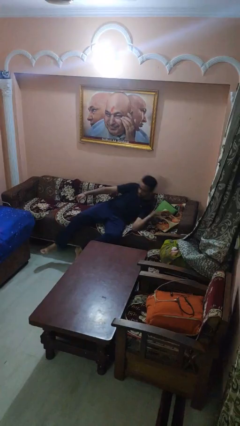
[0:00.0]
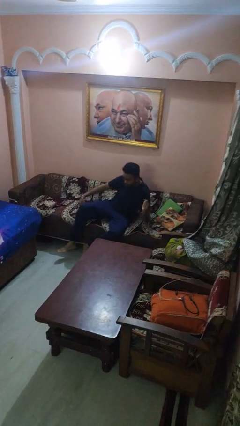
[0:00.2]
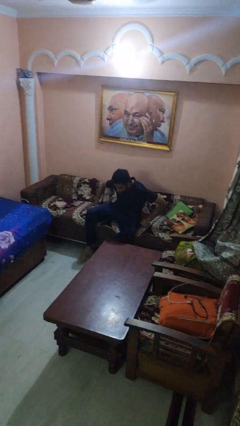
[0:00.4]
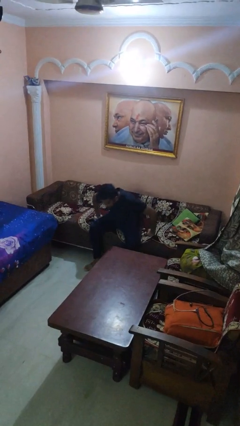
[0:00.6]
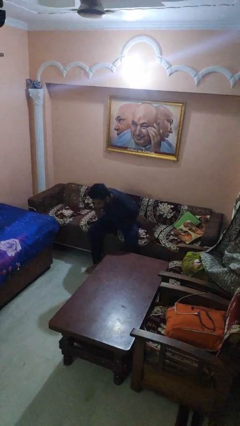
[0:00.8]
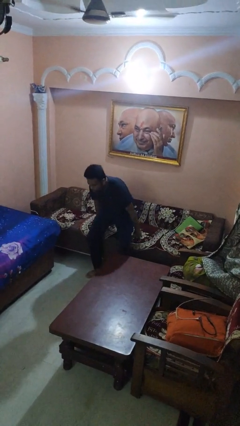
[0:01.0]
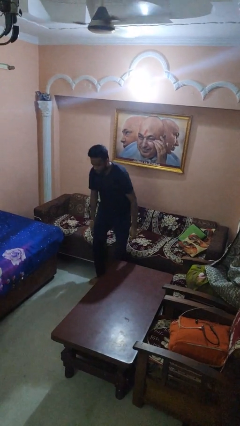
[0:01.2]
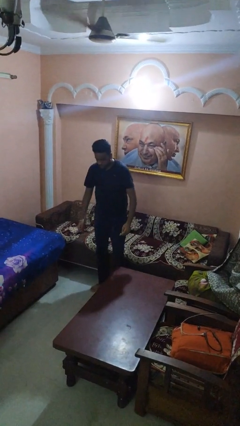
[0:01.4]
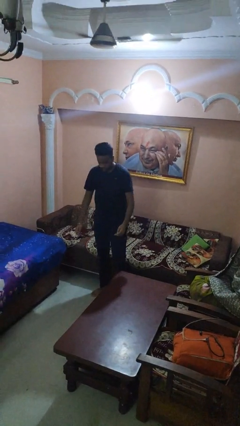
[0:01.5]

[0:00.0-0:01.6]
person stands up

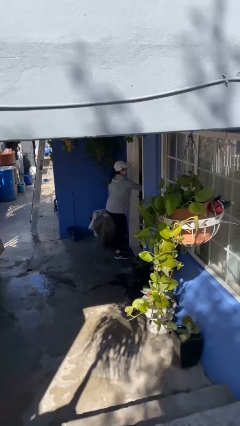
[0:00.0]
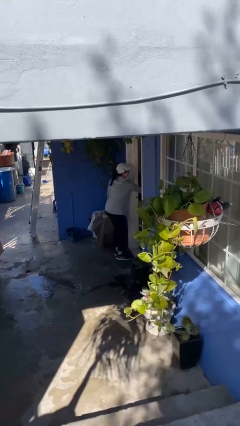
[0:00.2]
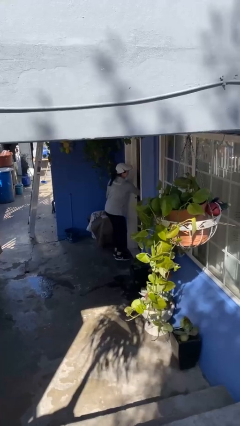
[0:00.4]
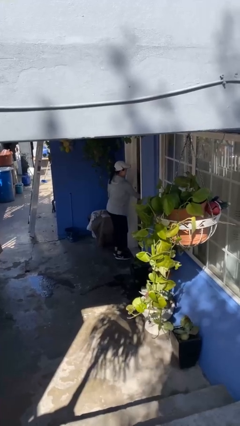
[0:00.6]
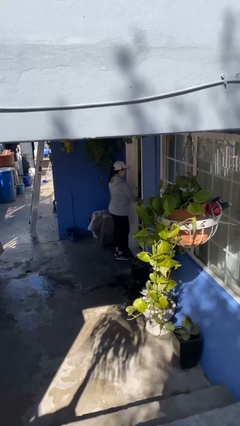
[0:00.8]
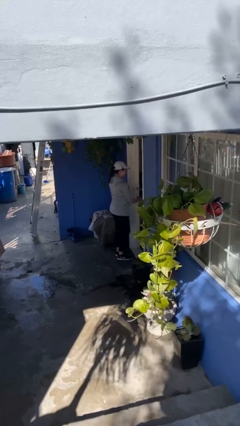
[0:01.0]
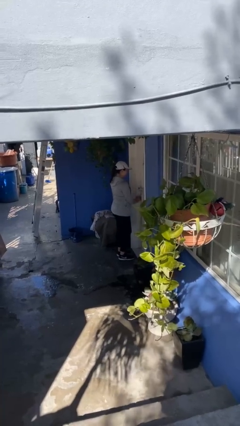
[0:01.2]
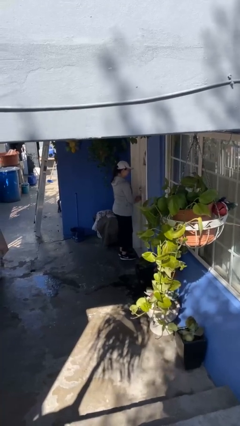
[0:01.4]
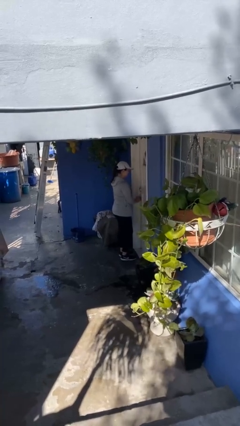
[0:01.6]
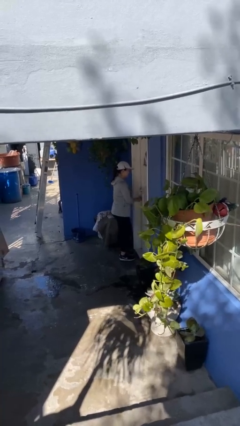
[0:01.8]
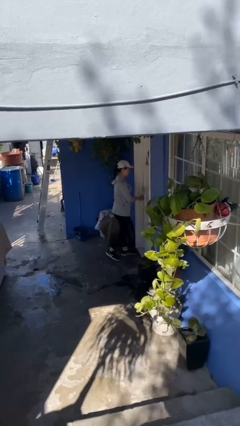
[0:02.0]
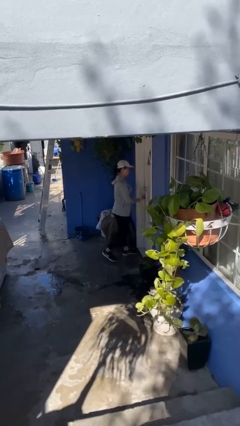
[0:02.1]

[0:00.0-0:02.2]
person closes facility door

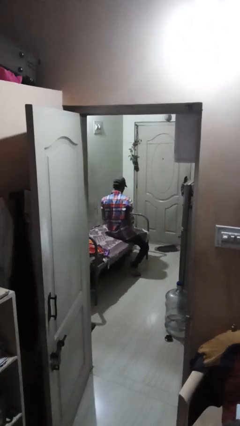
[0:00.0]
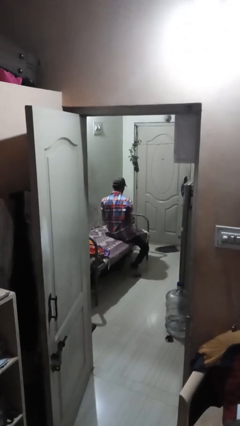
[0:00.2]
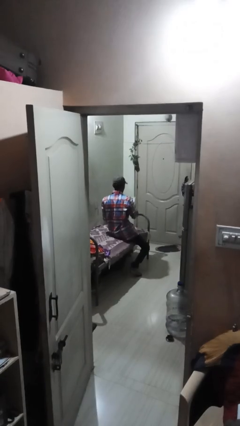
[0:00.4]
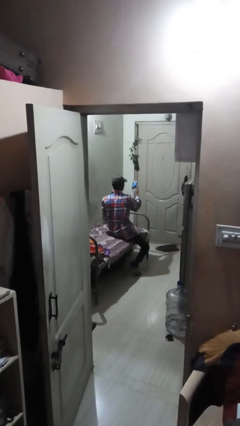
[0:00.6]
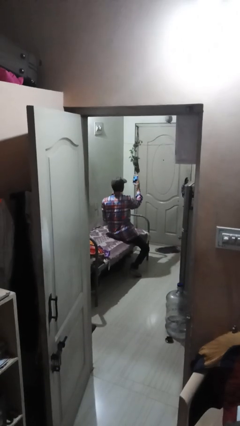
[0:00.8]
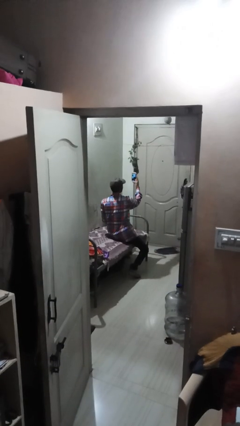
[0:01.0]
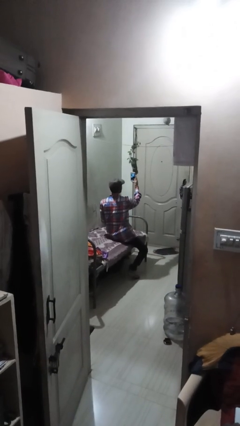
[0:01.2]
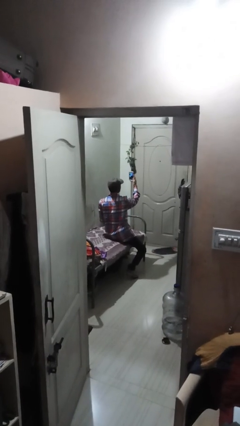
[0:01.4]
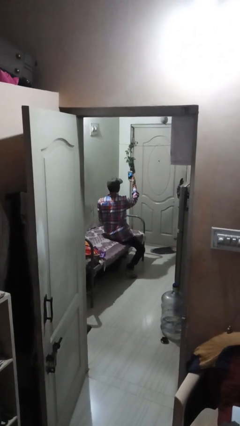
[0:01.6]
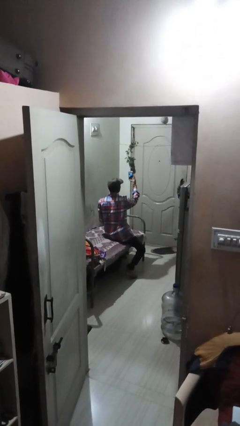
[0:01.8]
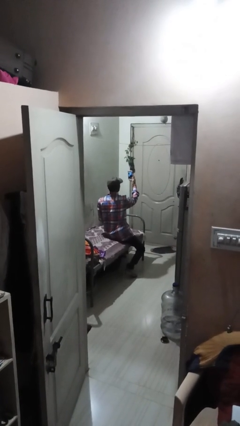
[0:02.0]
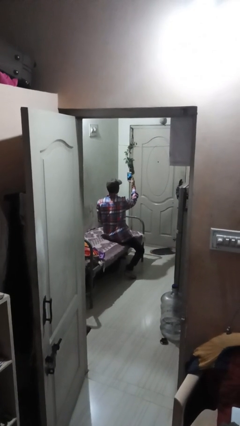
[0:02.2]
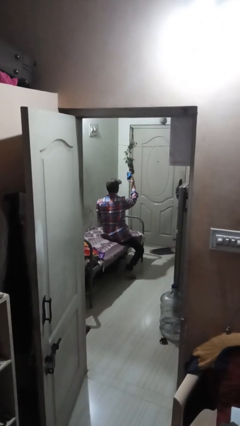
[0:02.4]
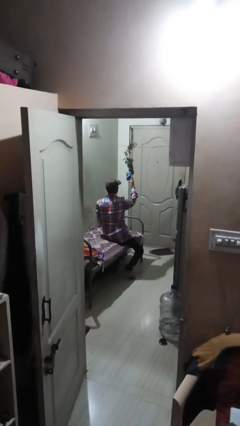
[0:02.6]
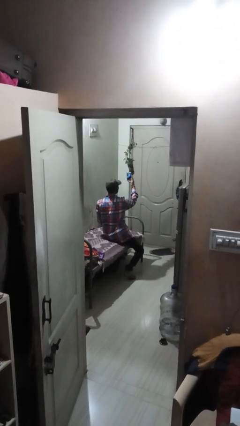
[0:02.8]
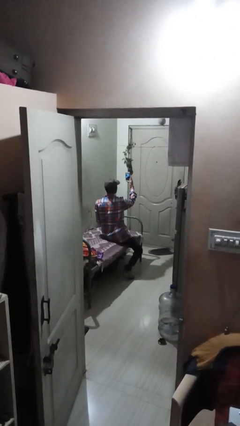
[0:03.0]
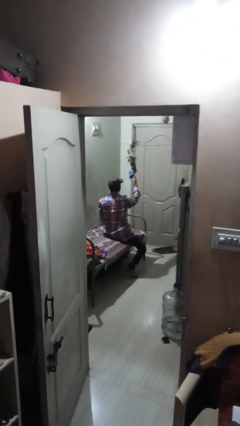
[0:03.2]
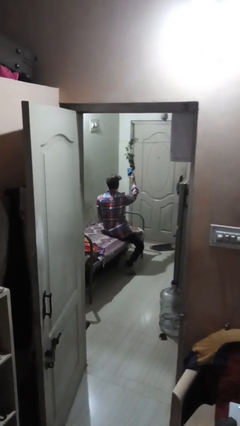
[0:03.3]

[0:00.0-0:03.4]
person takes selfie

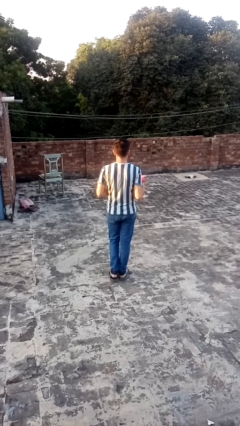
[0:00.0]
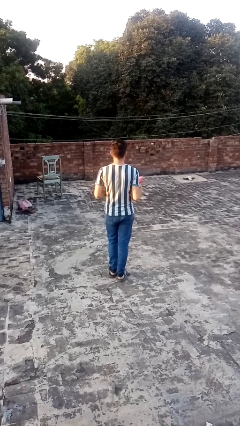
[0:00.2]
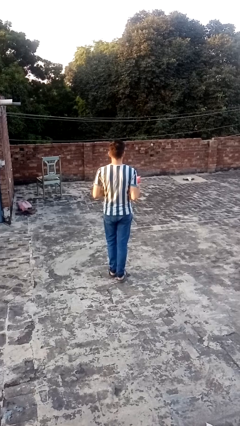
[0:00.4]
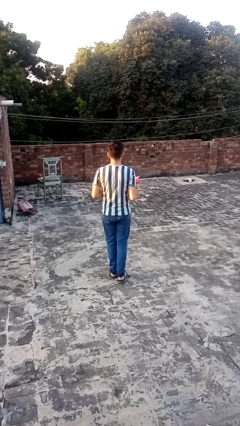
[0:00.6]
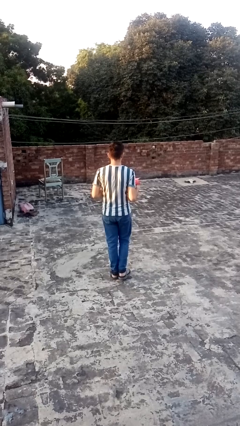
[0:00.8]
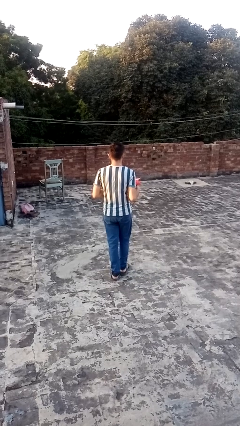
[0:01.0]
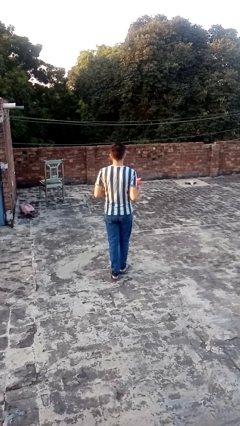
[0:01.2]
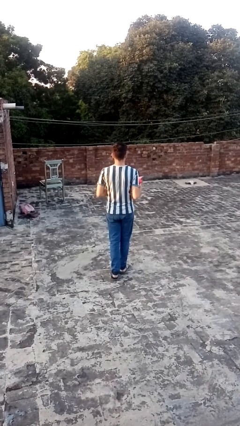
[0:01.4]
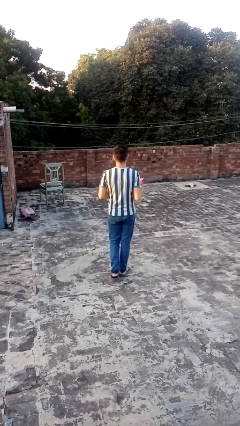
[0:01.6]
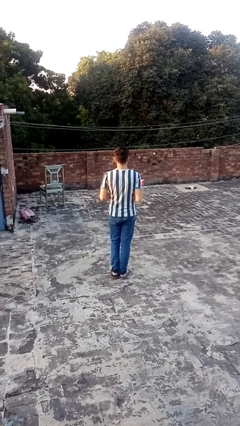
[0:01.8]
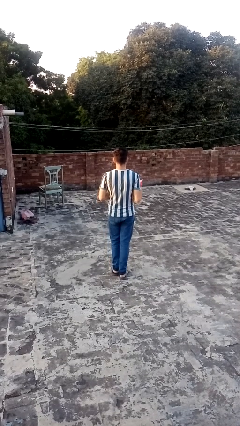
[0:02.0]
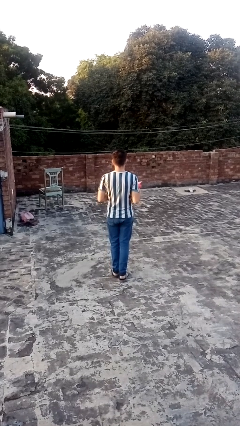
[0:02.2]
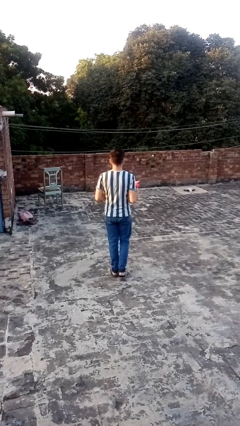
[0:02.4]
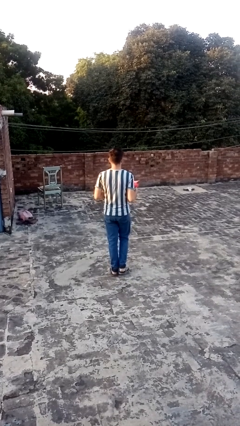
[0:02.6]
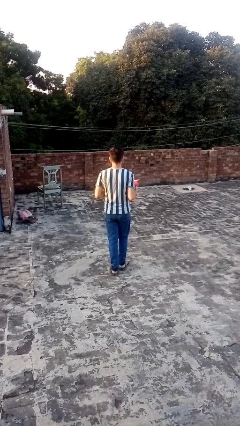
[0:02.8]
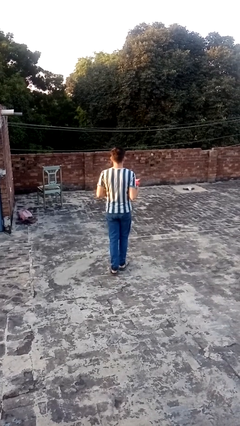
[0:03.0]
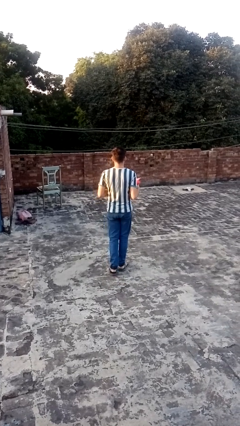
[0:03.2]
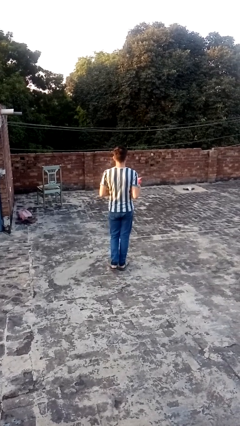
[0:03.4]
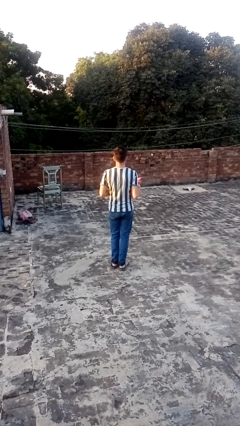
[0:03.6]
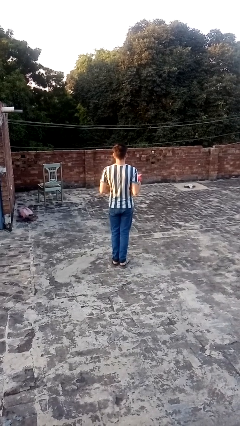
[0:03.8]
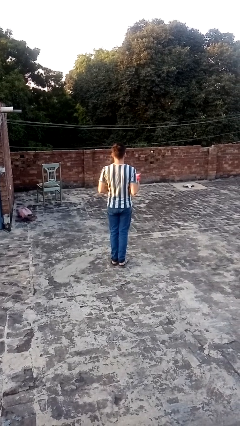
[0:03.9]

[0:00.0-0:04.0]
person carries laundry basket

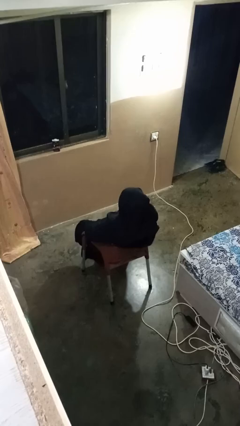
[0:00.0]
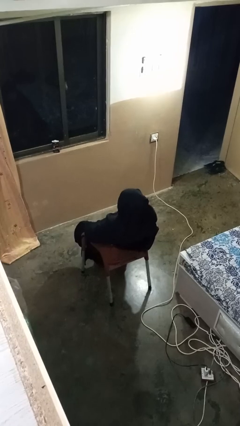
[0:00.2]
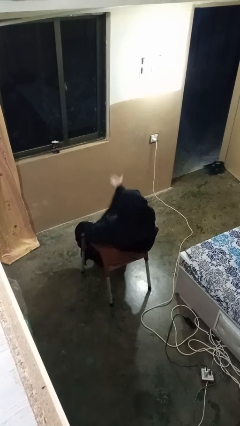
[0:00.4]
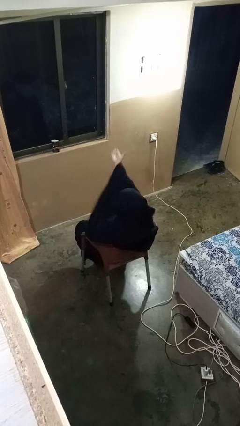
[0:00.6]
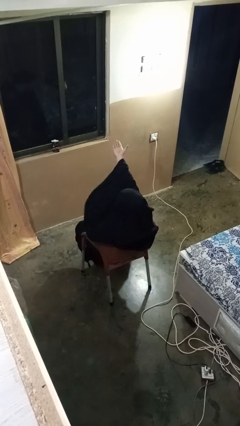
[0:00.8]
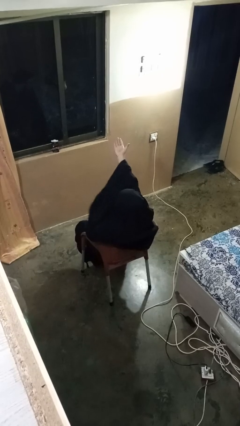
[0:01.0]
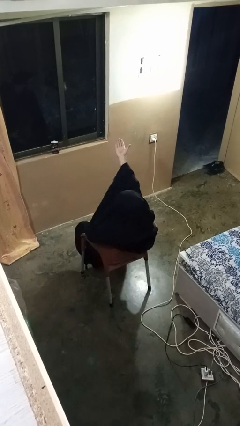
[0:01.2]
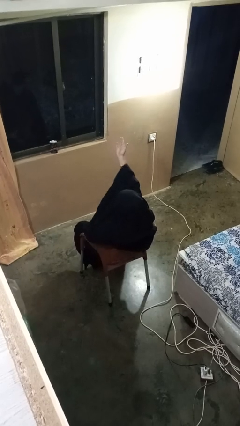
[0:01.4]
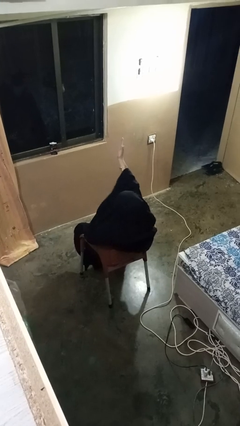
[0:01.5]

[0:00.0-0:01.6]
person gestures swipe up

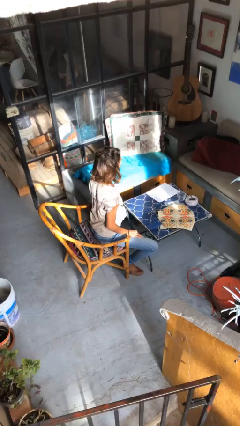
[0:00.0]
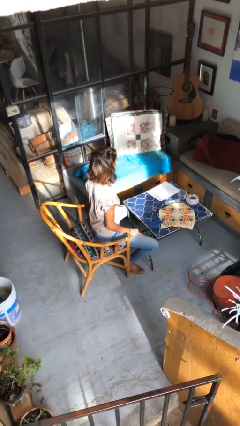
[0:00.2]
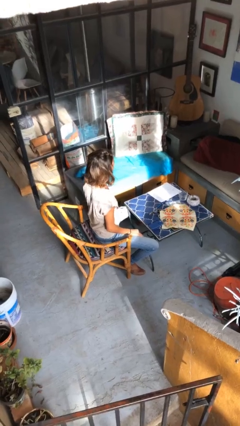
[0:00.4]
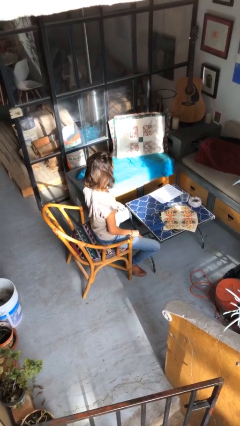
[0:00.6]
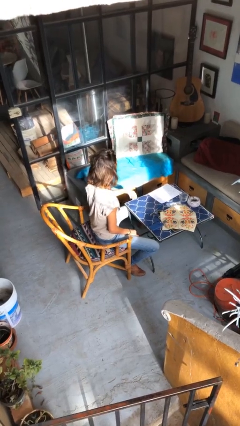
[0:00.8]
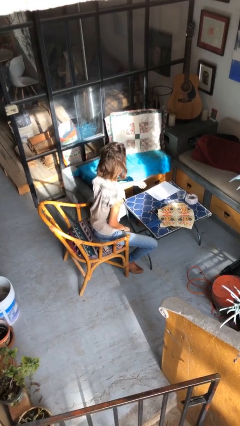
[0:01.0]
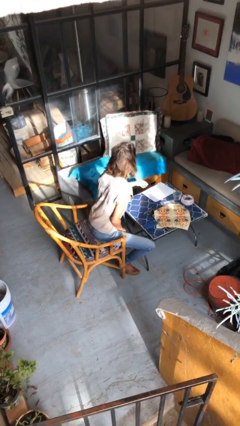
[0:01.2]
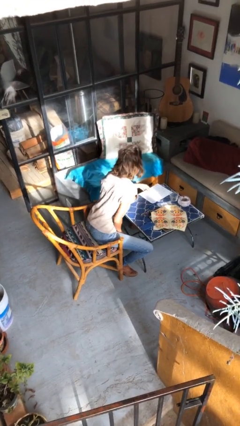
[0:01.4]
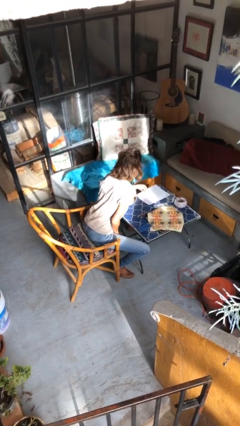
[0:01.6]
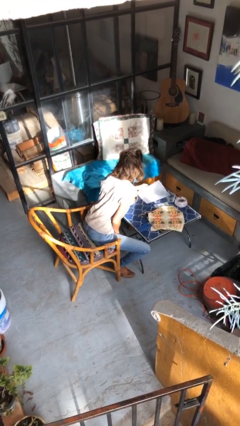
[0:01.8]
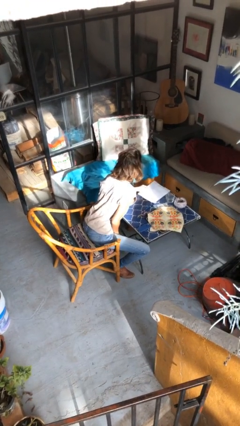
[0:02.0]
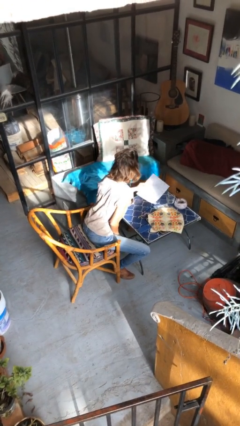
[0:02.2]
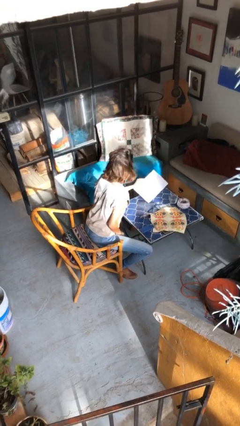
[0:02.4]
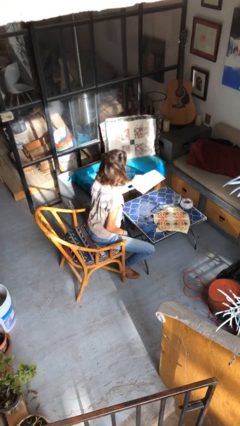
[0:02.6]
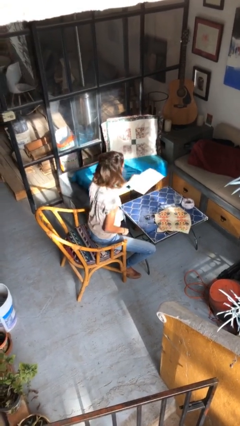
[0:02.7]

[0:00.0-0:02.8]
person picks up object from table

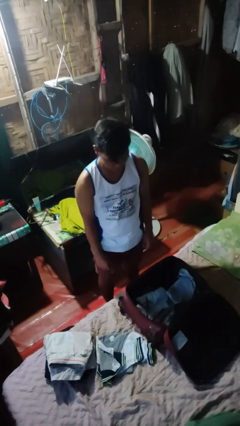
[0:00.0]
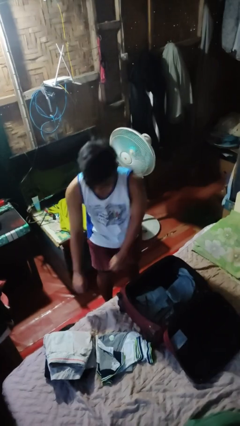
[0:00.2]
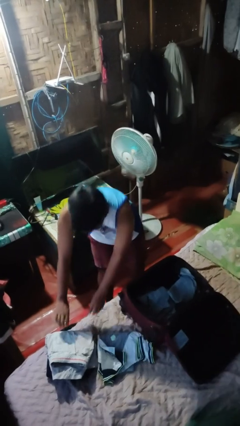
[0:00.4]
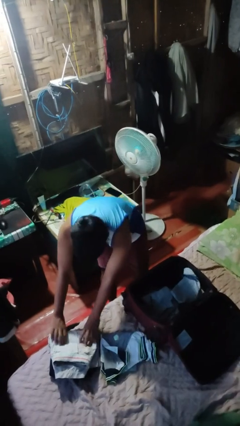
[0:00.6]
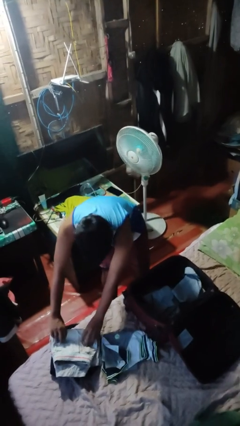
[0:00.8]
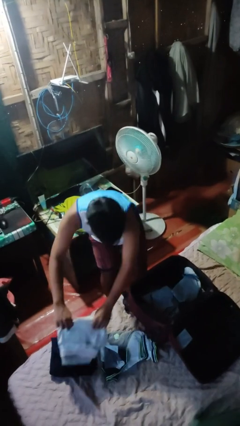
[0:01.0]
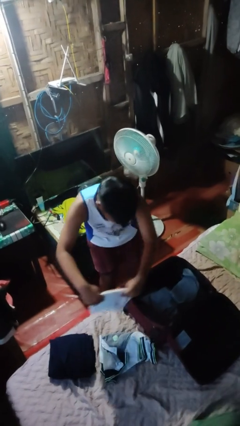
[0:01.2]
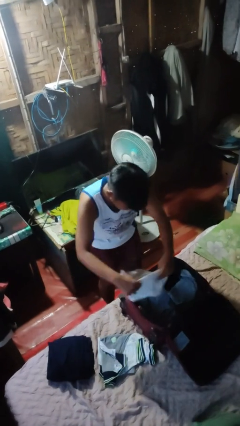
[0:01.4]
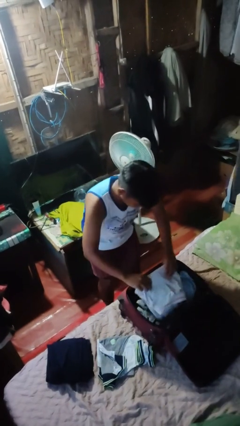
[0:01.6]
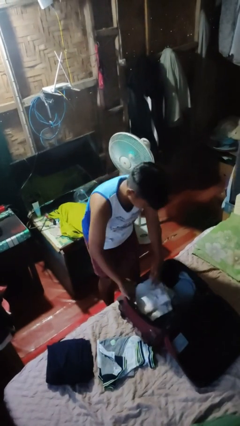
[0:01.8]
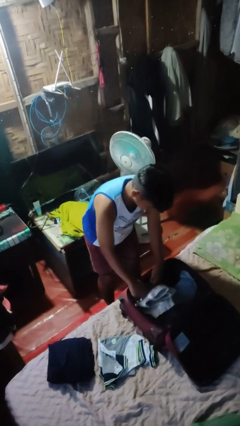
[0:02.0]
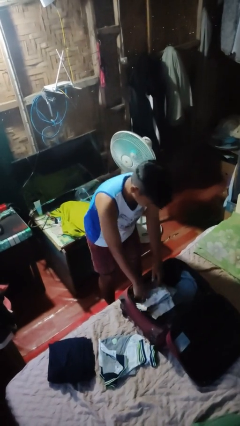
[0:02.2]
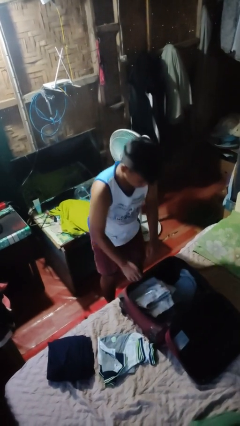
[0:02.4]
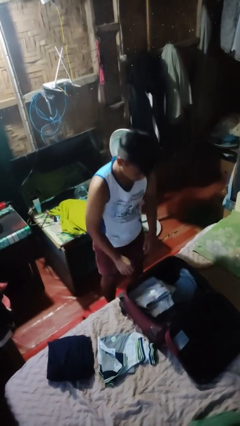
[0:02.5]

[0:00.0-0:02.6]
person loads clothes into suitcase
